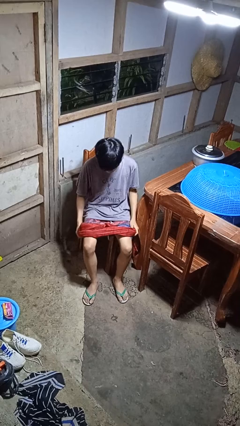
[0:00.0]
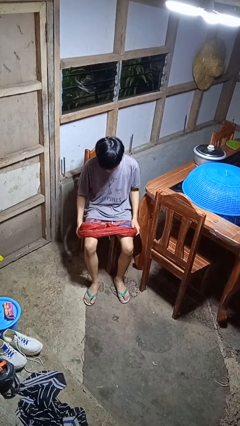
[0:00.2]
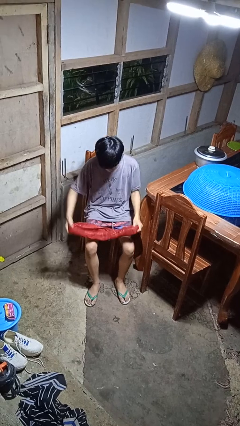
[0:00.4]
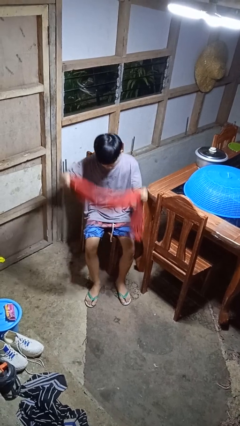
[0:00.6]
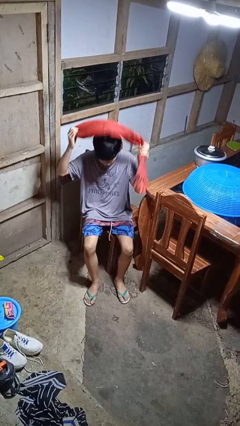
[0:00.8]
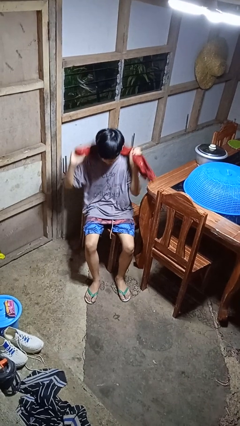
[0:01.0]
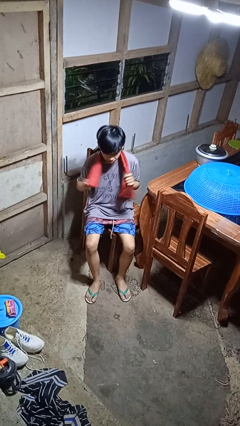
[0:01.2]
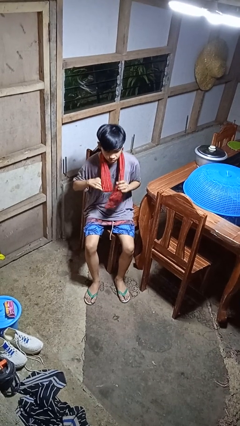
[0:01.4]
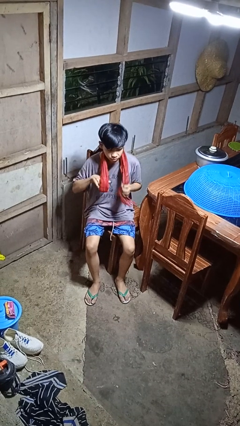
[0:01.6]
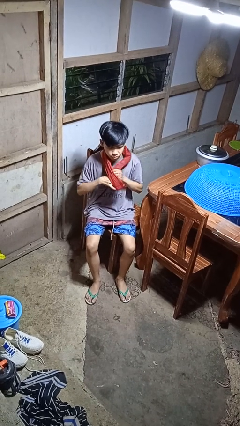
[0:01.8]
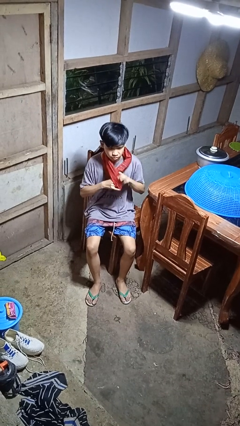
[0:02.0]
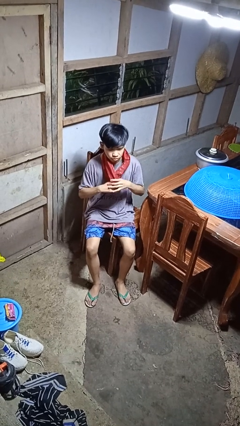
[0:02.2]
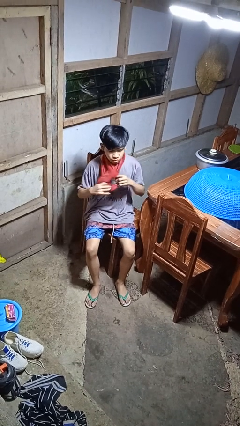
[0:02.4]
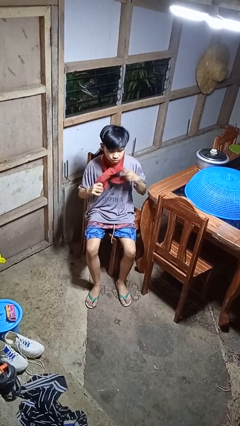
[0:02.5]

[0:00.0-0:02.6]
person puts on scarf

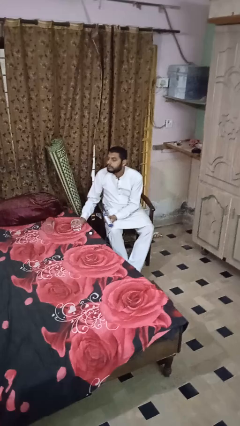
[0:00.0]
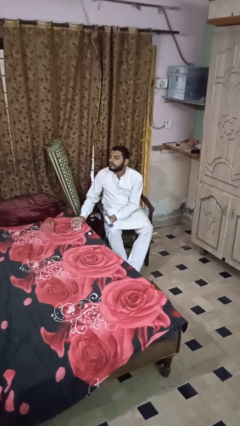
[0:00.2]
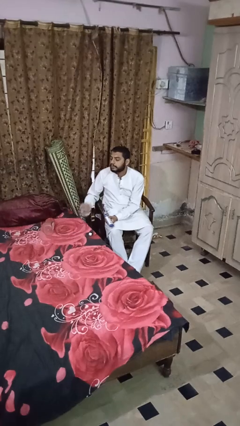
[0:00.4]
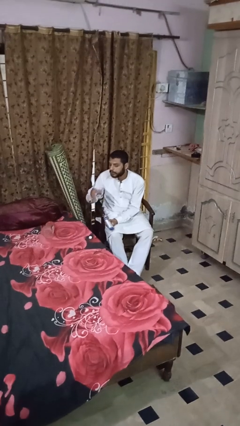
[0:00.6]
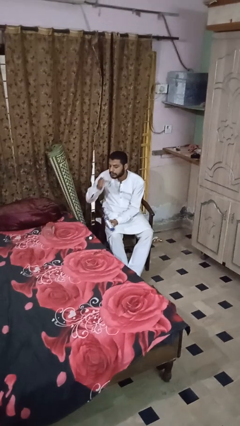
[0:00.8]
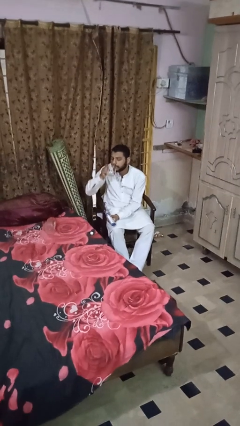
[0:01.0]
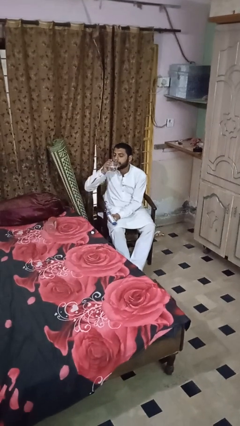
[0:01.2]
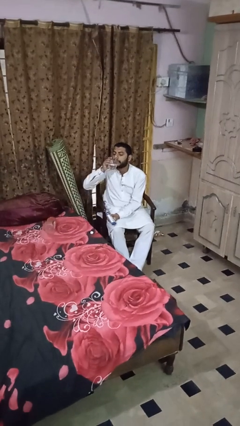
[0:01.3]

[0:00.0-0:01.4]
person drinks from cup

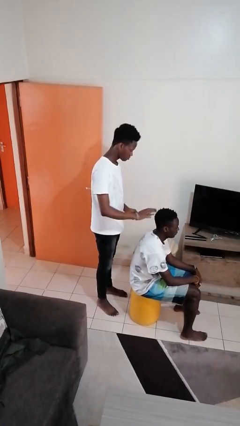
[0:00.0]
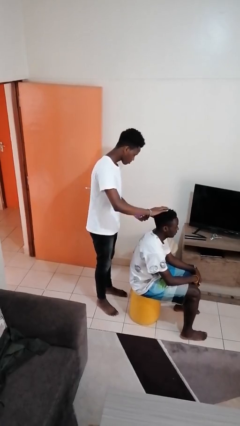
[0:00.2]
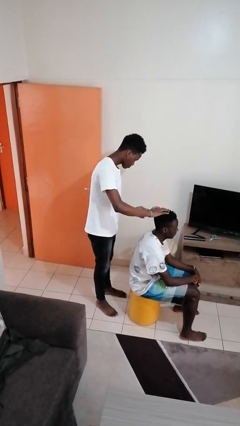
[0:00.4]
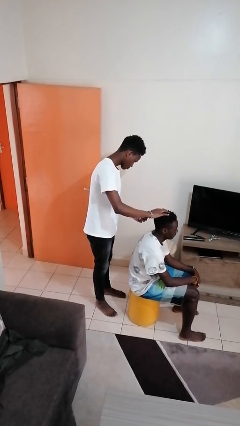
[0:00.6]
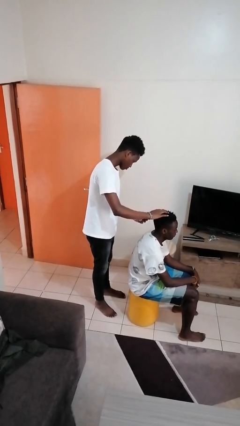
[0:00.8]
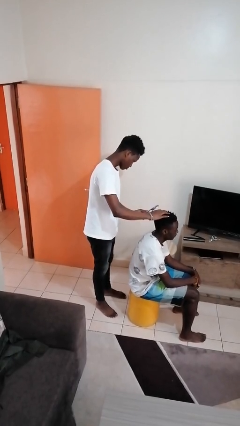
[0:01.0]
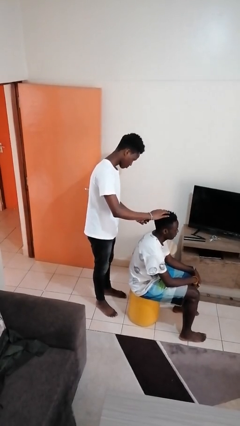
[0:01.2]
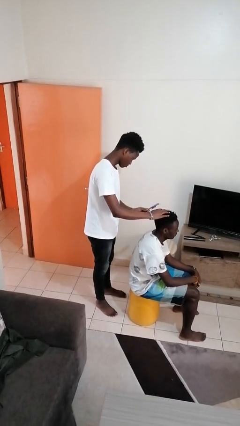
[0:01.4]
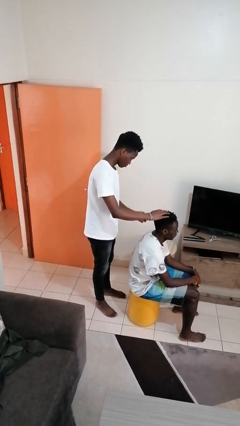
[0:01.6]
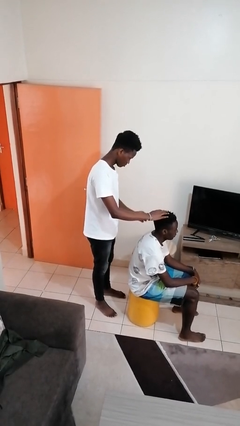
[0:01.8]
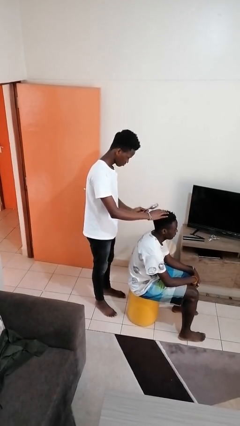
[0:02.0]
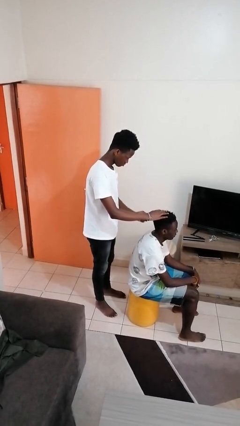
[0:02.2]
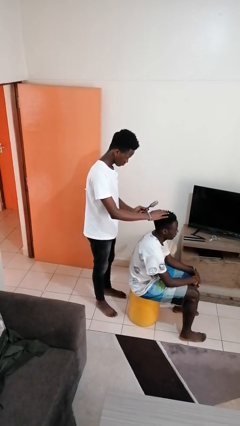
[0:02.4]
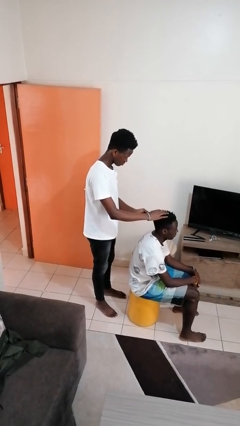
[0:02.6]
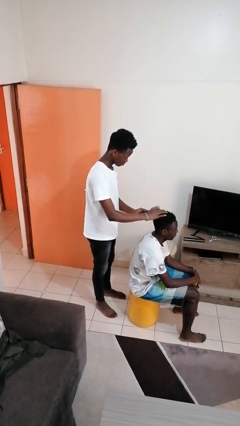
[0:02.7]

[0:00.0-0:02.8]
person brushes hair of person

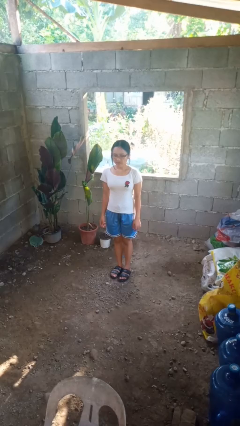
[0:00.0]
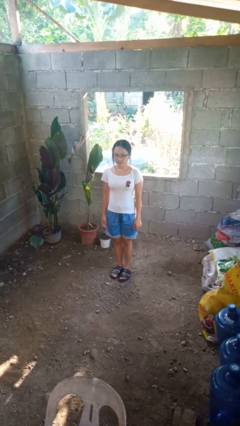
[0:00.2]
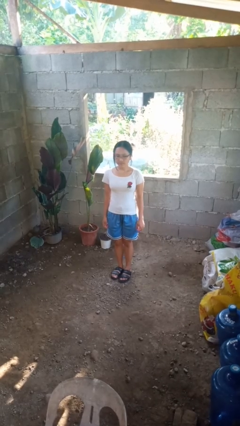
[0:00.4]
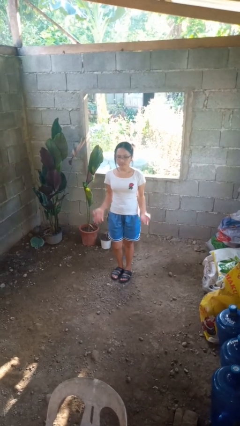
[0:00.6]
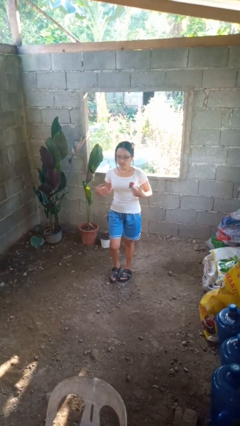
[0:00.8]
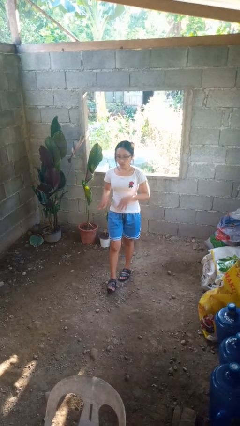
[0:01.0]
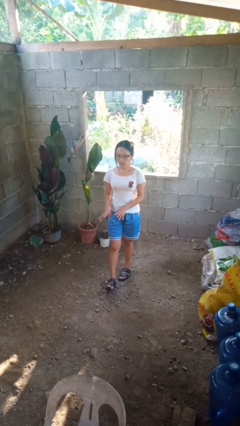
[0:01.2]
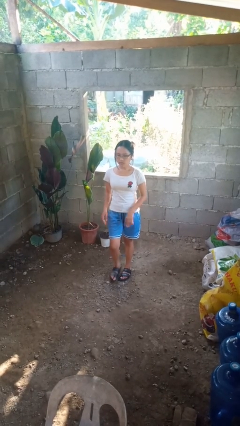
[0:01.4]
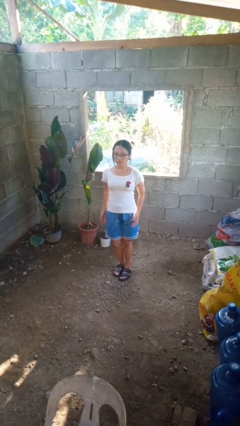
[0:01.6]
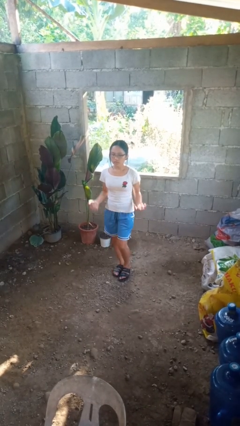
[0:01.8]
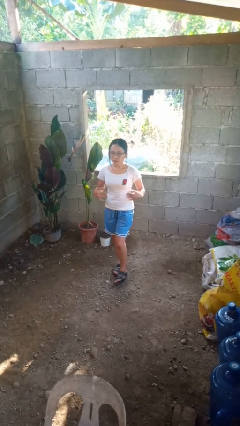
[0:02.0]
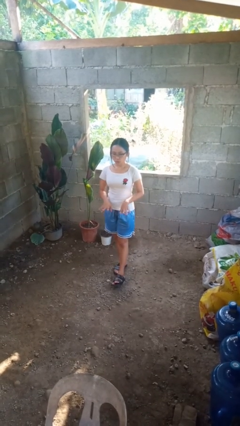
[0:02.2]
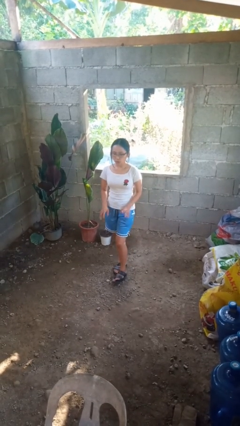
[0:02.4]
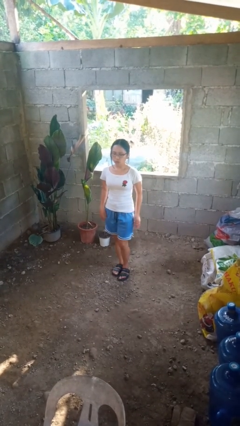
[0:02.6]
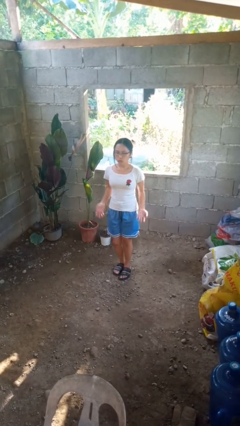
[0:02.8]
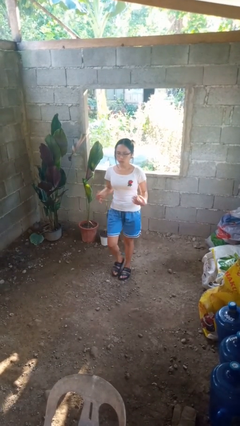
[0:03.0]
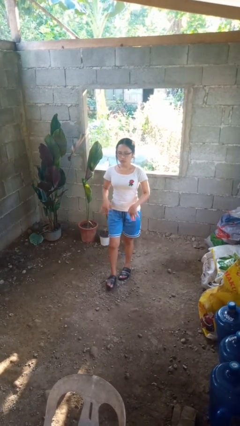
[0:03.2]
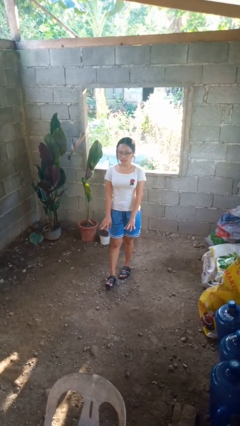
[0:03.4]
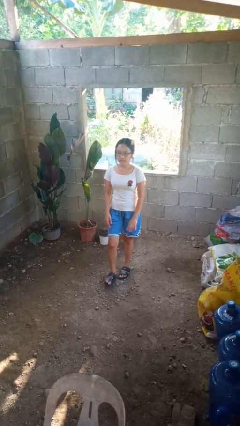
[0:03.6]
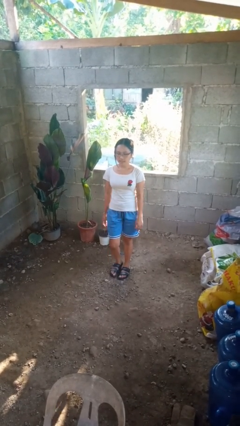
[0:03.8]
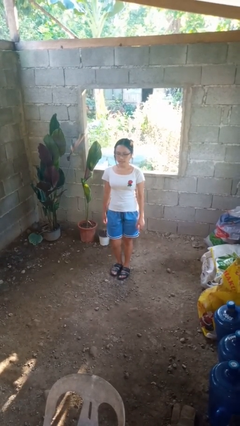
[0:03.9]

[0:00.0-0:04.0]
person dances in place

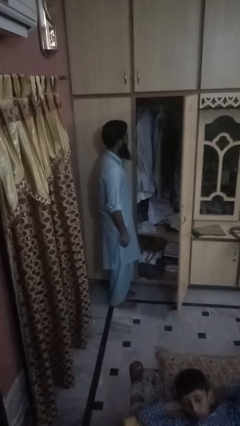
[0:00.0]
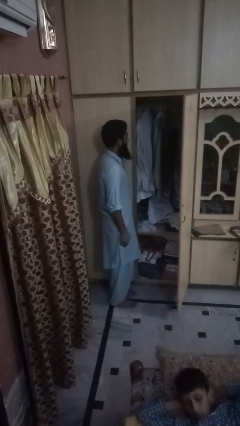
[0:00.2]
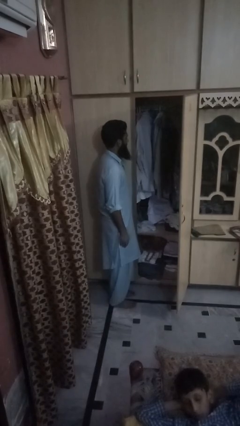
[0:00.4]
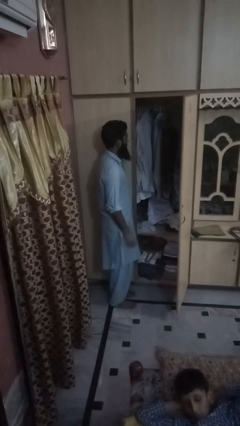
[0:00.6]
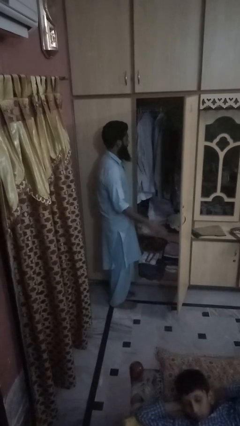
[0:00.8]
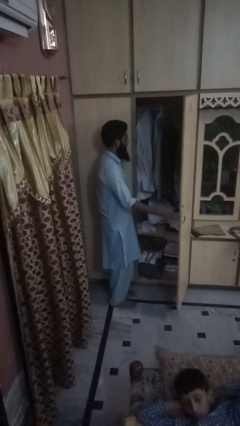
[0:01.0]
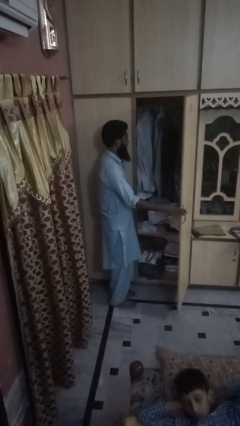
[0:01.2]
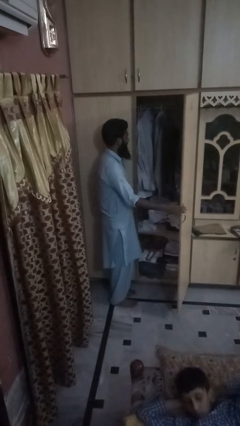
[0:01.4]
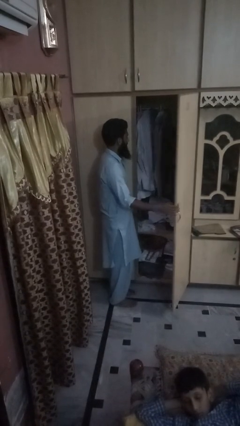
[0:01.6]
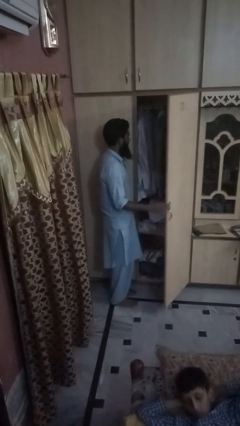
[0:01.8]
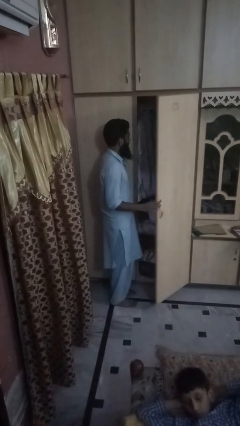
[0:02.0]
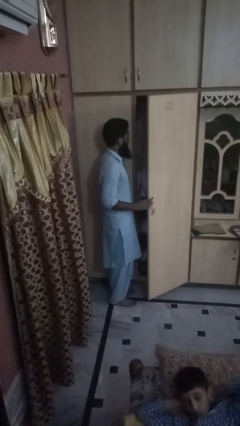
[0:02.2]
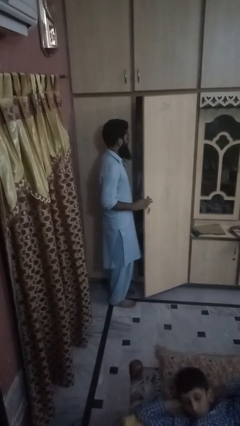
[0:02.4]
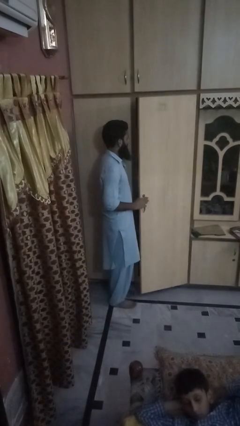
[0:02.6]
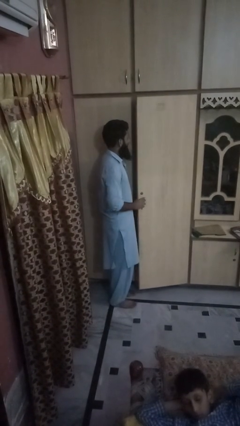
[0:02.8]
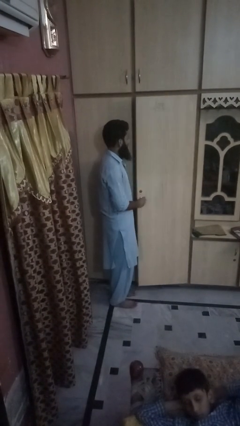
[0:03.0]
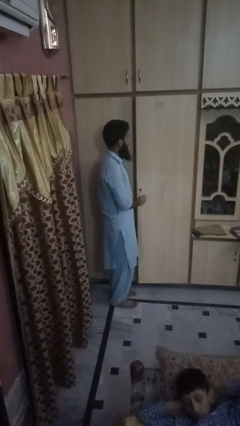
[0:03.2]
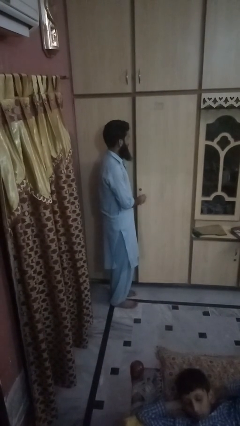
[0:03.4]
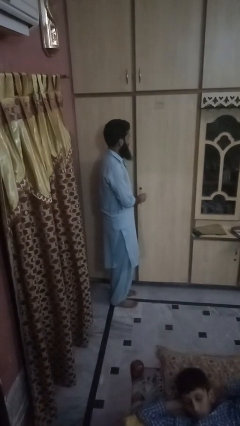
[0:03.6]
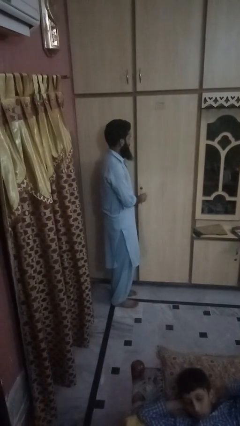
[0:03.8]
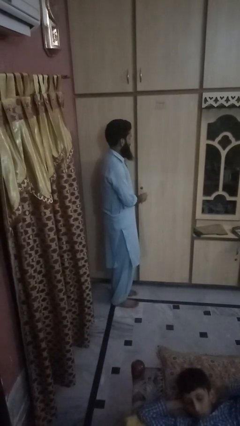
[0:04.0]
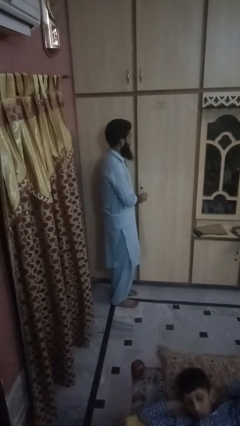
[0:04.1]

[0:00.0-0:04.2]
person closes dresser drawer

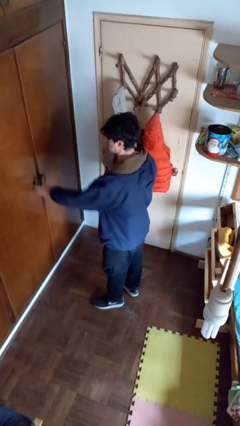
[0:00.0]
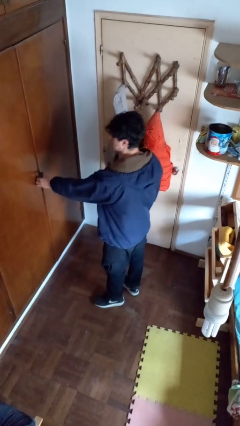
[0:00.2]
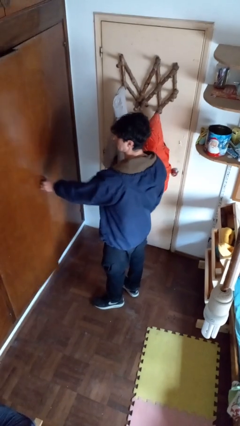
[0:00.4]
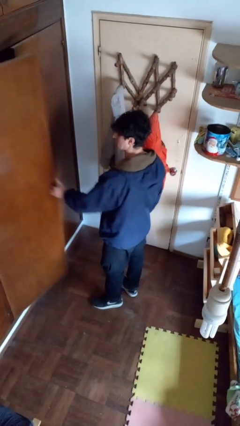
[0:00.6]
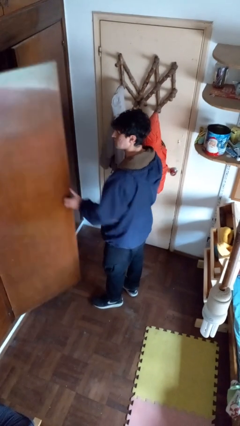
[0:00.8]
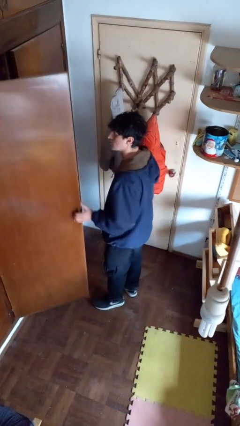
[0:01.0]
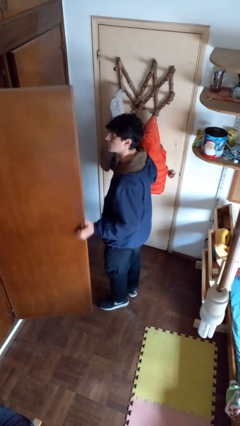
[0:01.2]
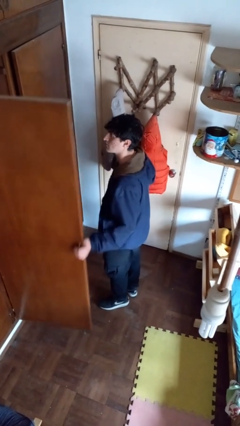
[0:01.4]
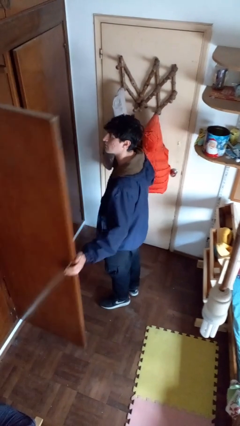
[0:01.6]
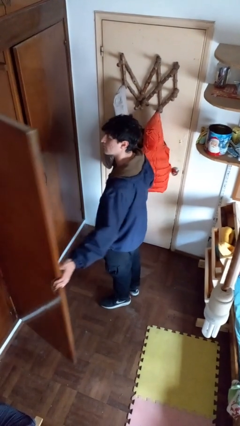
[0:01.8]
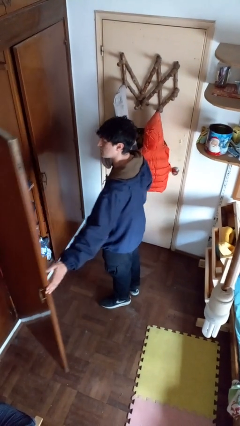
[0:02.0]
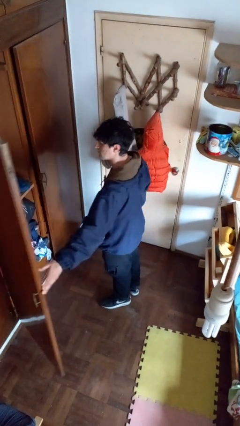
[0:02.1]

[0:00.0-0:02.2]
person opens closet door
